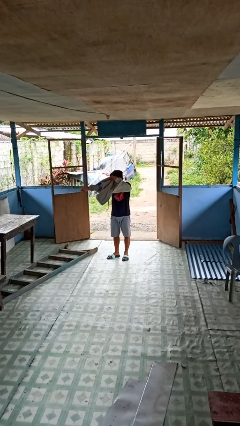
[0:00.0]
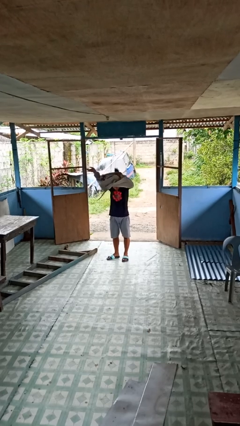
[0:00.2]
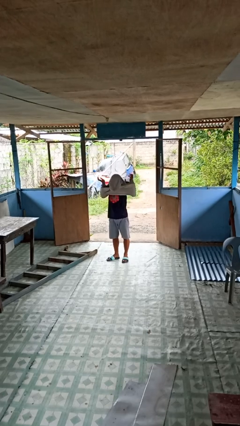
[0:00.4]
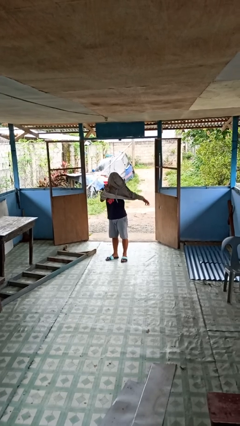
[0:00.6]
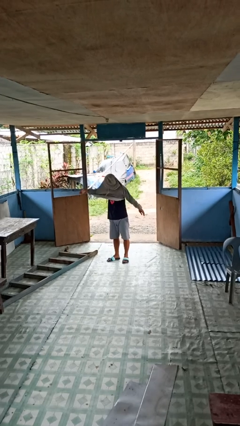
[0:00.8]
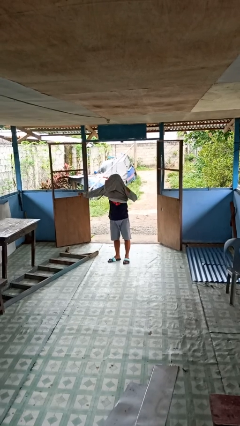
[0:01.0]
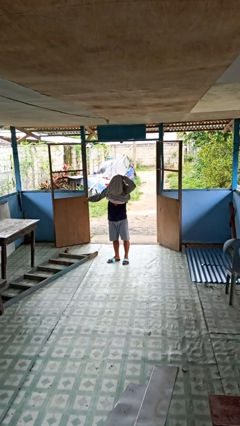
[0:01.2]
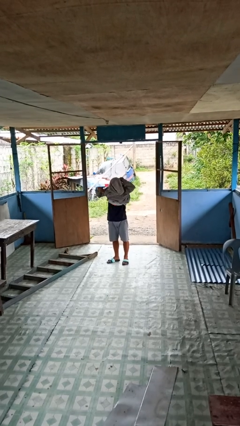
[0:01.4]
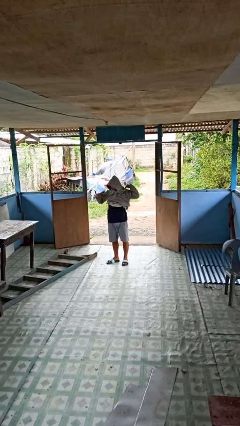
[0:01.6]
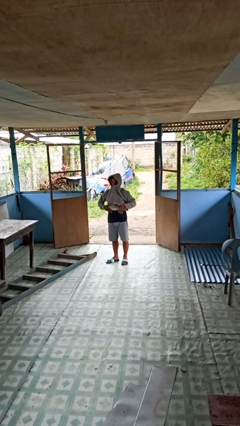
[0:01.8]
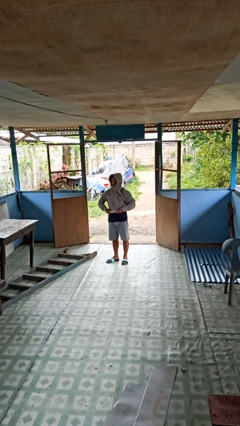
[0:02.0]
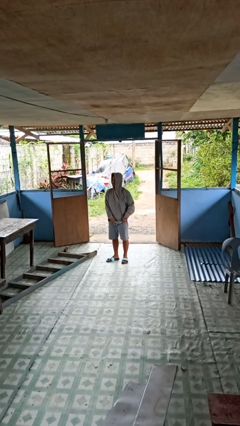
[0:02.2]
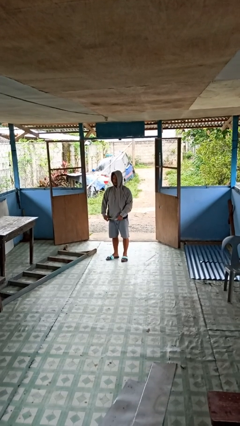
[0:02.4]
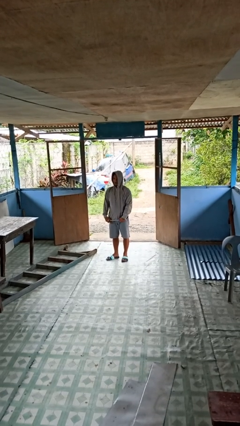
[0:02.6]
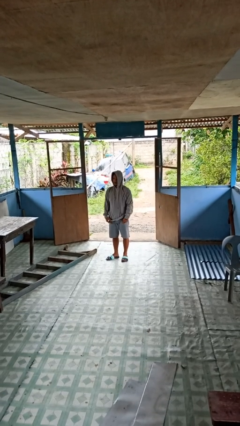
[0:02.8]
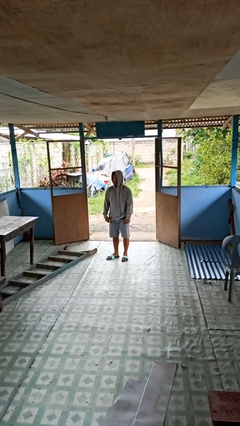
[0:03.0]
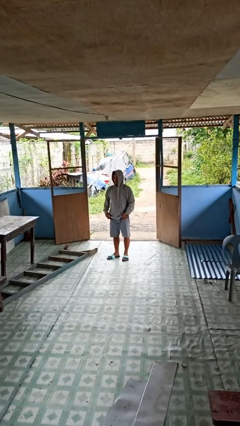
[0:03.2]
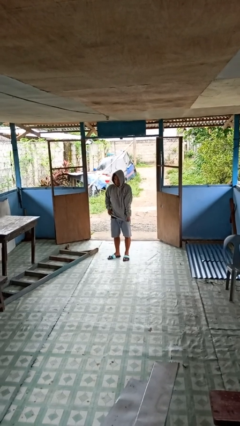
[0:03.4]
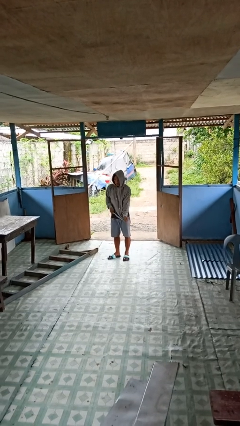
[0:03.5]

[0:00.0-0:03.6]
person puts on hoodie

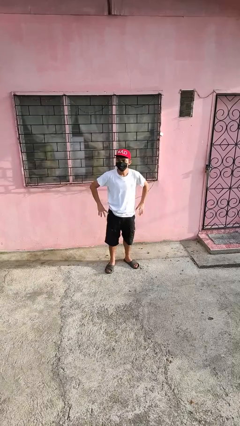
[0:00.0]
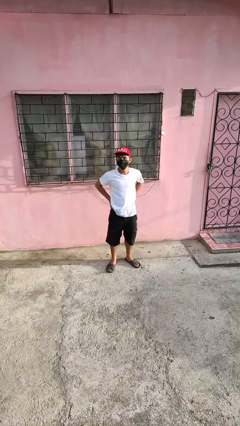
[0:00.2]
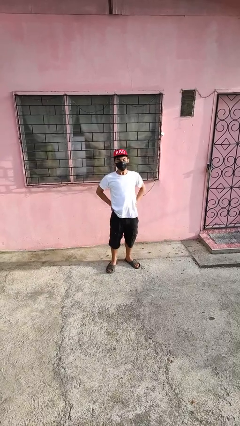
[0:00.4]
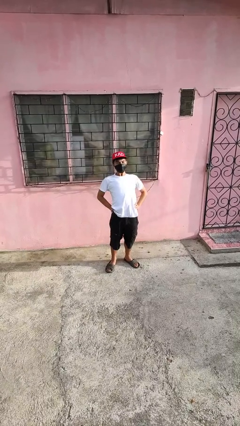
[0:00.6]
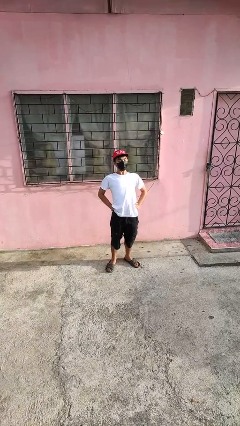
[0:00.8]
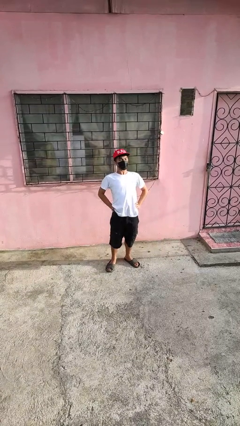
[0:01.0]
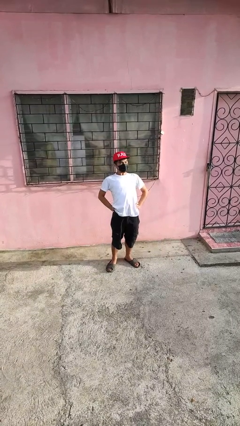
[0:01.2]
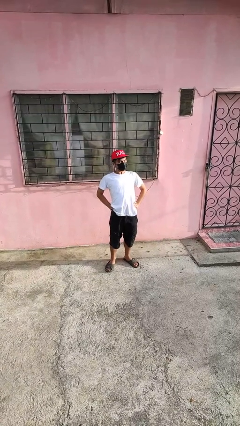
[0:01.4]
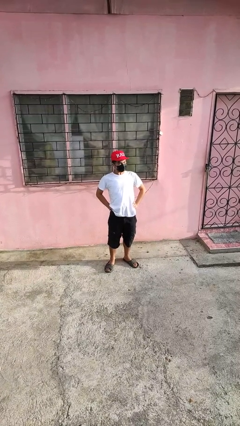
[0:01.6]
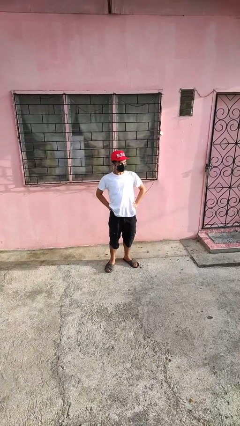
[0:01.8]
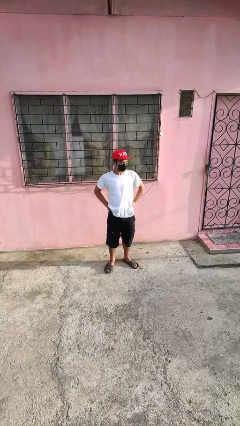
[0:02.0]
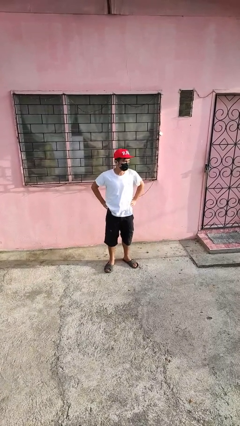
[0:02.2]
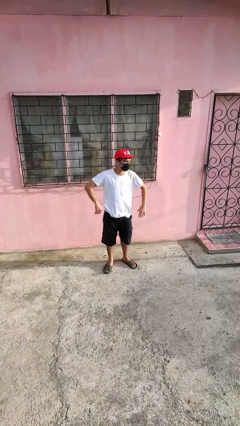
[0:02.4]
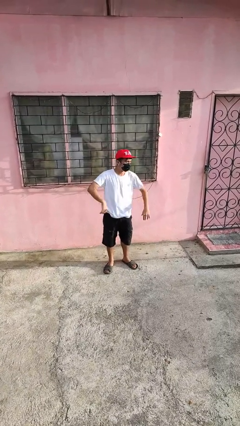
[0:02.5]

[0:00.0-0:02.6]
person stretches back

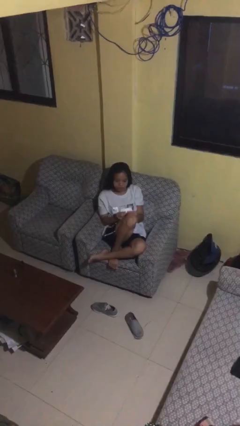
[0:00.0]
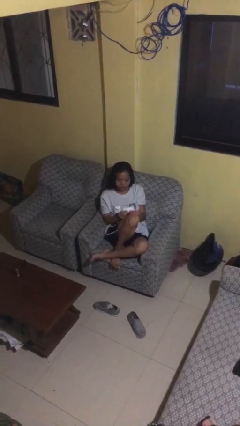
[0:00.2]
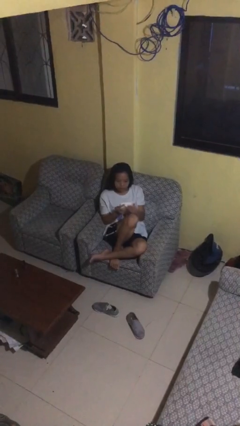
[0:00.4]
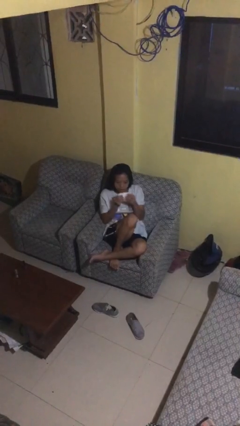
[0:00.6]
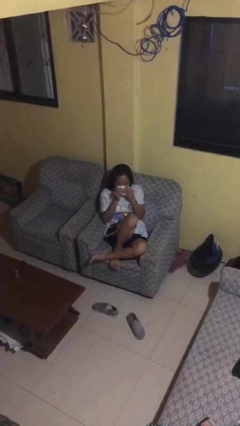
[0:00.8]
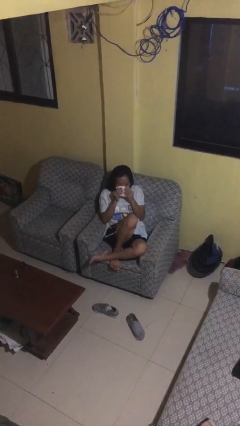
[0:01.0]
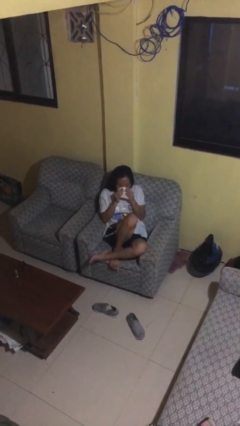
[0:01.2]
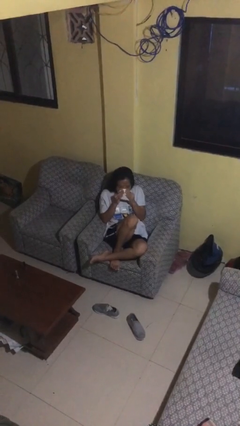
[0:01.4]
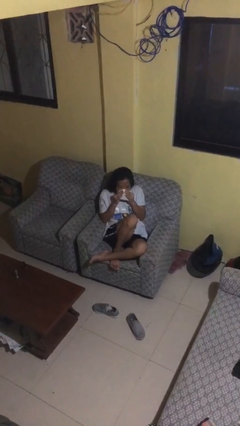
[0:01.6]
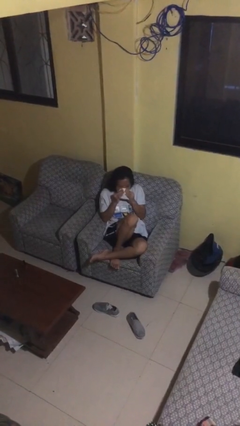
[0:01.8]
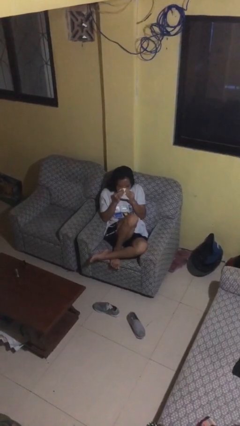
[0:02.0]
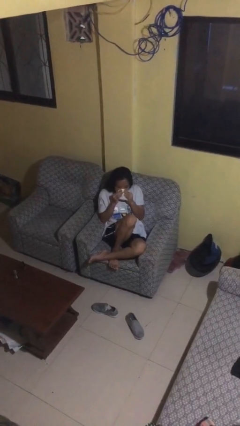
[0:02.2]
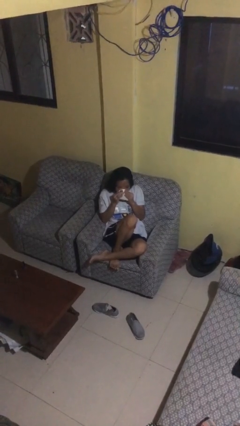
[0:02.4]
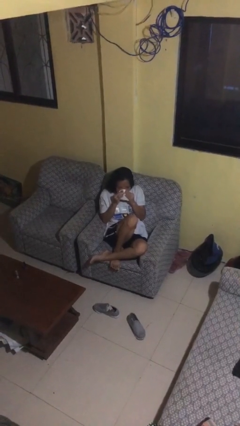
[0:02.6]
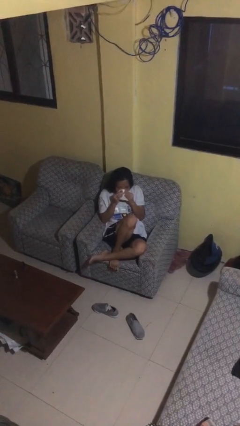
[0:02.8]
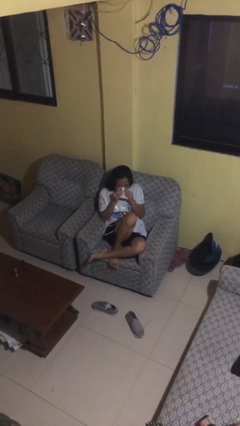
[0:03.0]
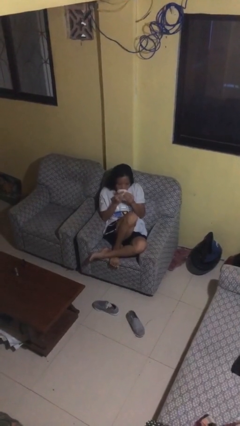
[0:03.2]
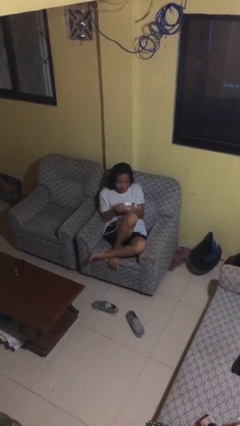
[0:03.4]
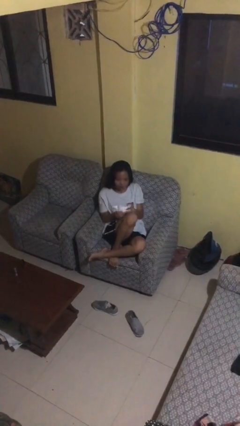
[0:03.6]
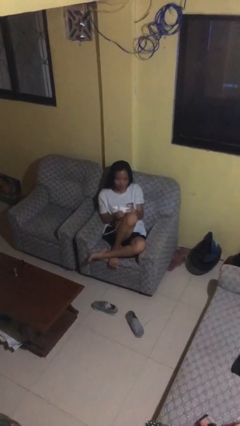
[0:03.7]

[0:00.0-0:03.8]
person blows nose

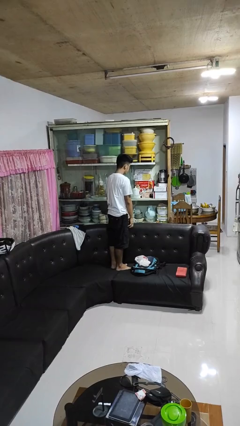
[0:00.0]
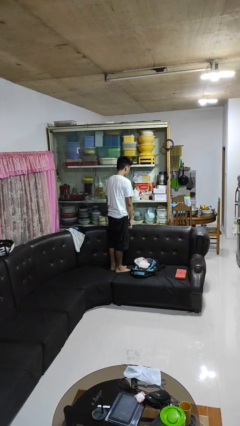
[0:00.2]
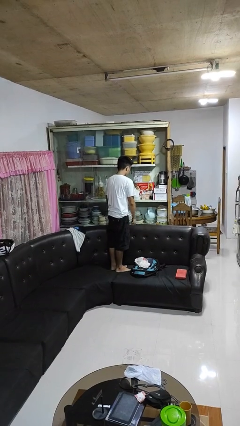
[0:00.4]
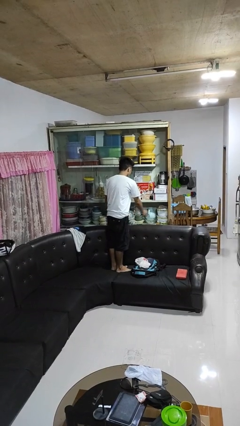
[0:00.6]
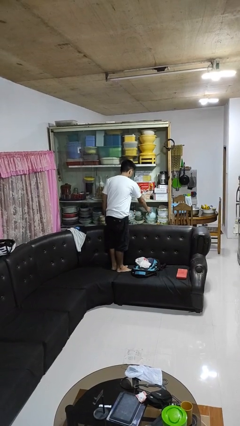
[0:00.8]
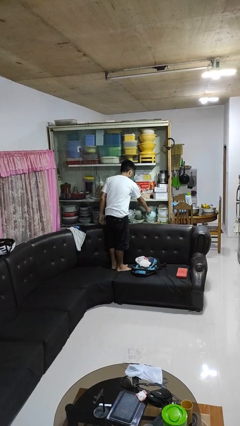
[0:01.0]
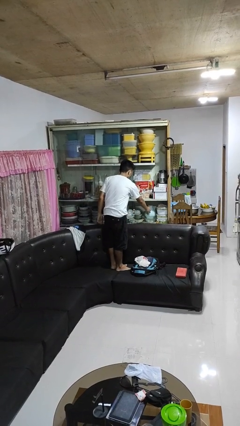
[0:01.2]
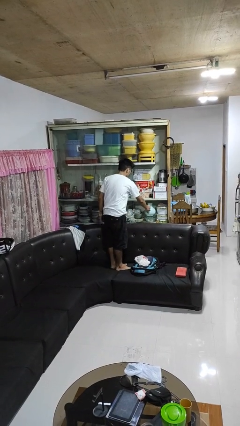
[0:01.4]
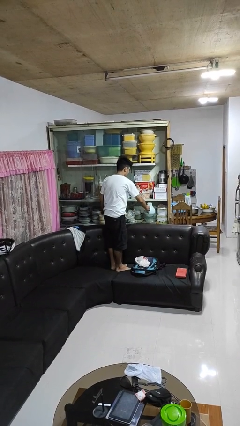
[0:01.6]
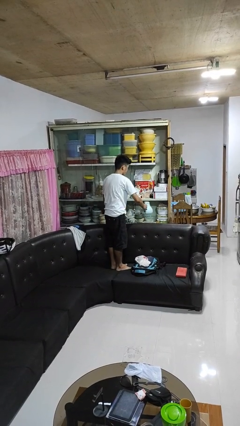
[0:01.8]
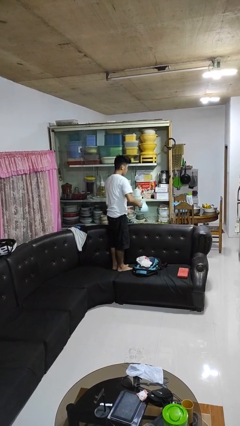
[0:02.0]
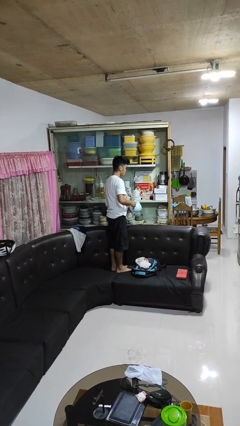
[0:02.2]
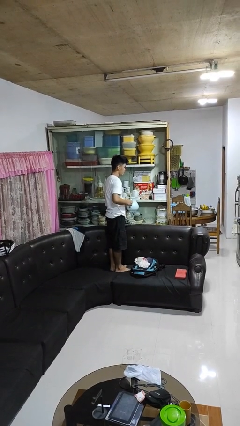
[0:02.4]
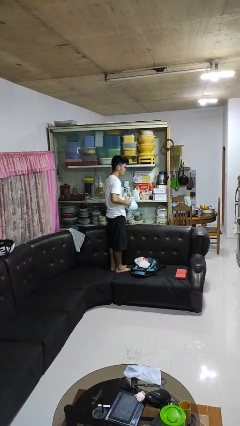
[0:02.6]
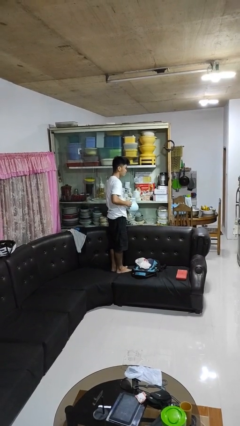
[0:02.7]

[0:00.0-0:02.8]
person picks up object from cabinet

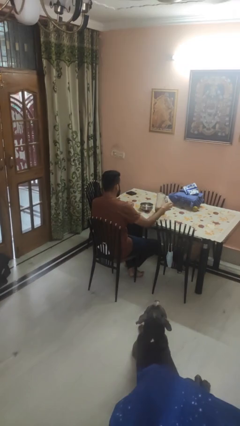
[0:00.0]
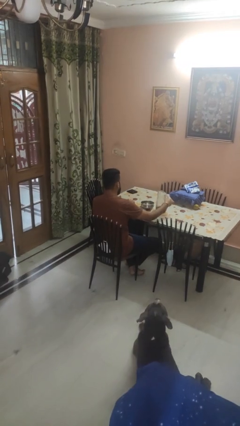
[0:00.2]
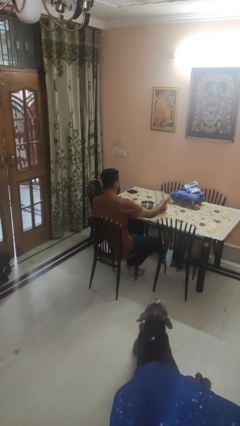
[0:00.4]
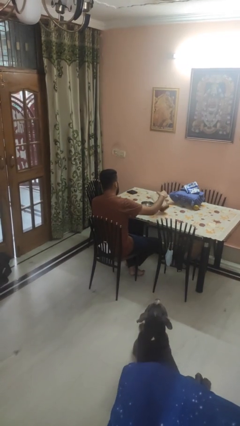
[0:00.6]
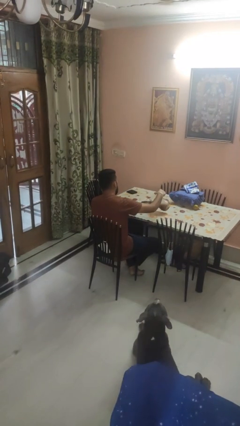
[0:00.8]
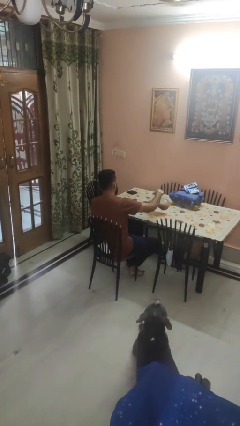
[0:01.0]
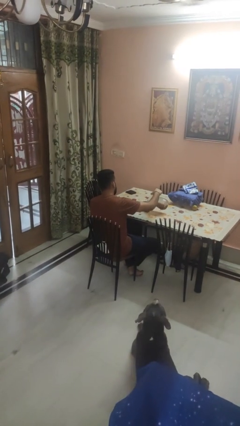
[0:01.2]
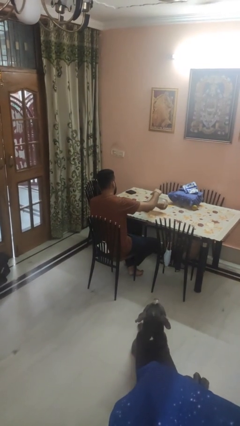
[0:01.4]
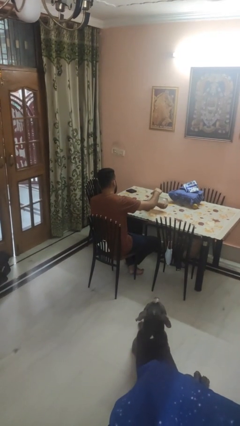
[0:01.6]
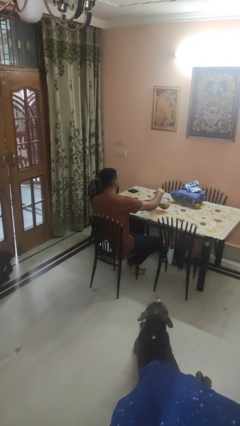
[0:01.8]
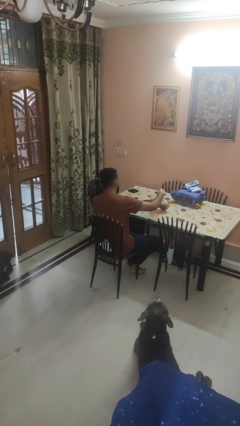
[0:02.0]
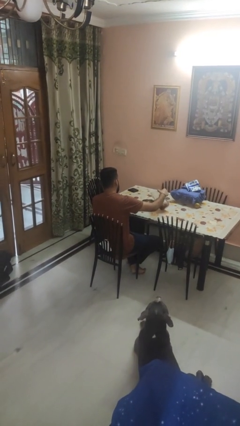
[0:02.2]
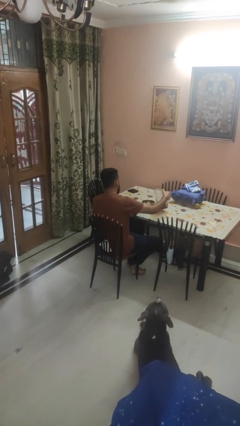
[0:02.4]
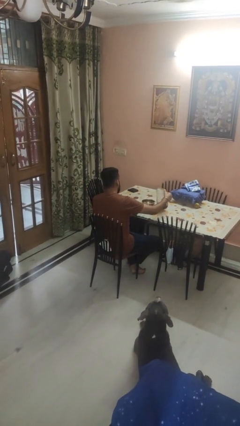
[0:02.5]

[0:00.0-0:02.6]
person pours into bowl

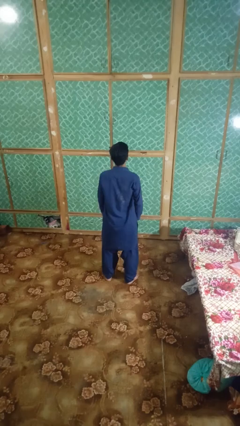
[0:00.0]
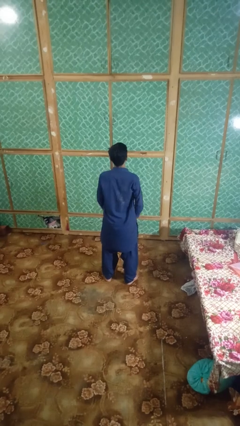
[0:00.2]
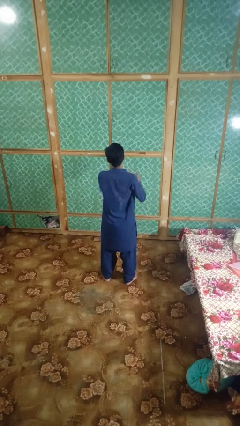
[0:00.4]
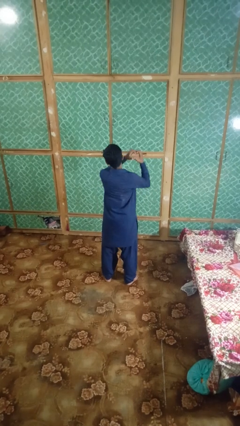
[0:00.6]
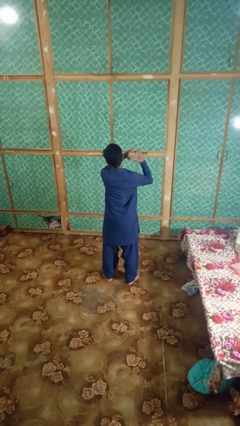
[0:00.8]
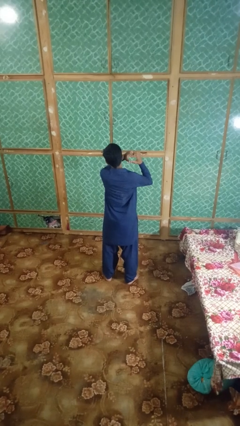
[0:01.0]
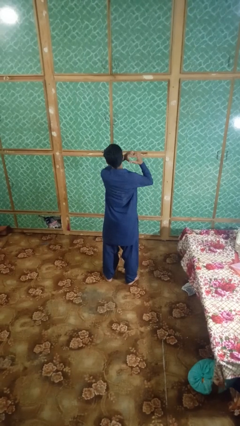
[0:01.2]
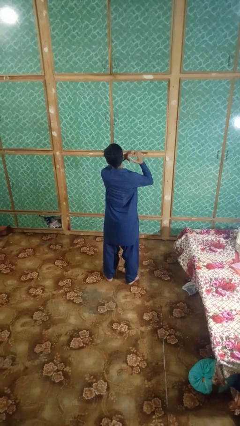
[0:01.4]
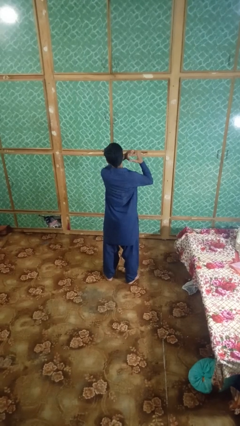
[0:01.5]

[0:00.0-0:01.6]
person gestures heart

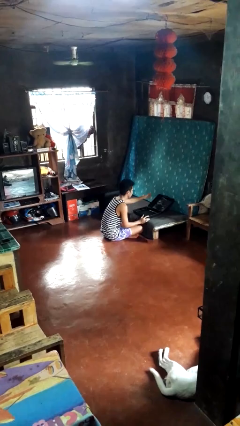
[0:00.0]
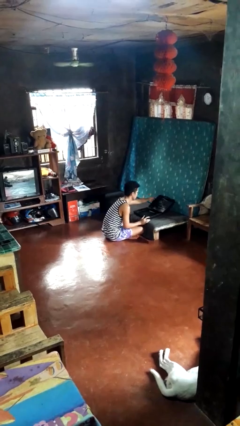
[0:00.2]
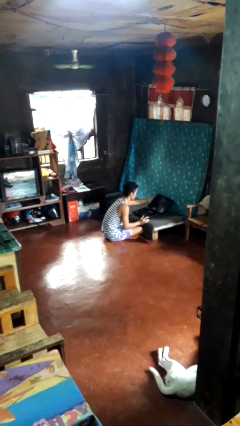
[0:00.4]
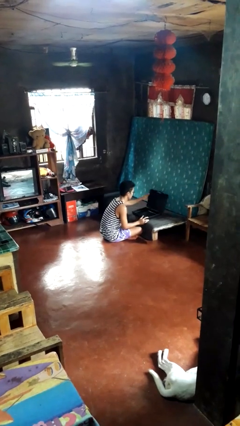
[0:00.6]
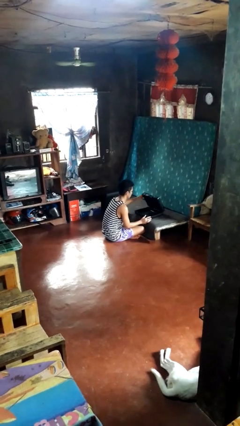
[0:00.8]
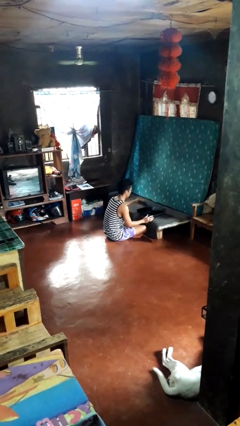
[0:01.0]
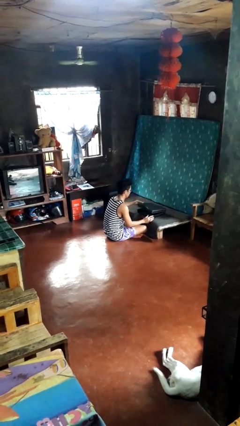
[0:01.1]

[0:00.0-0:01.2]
person closes suitcase
